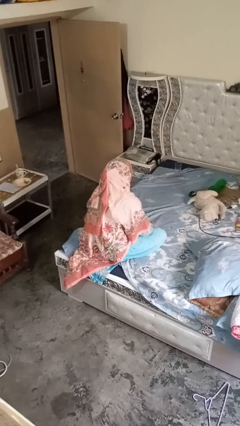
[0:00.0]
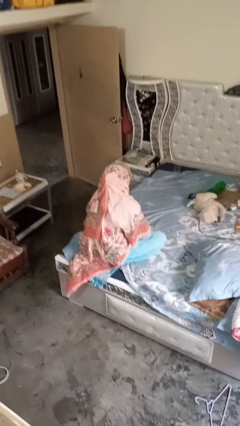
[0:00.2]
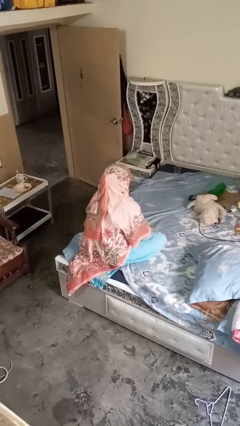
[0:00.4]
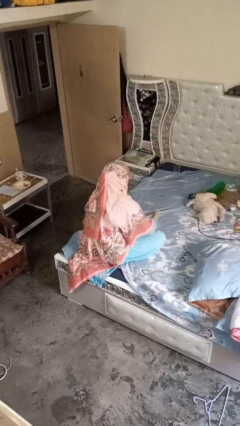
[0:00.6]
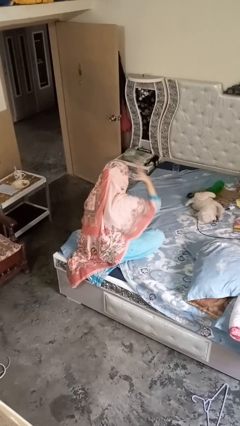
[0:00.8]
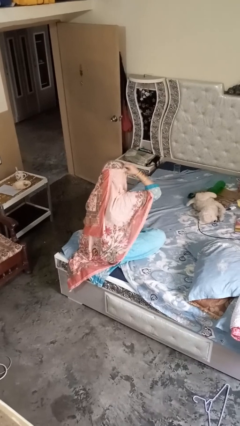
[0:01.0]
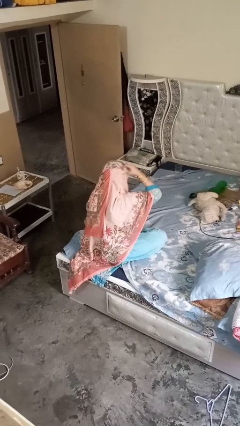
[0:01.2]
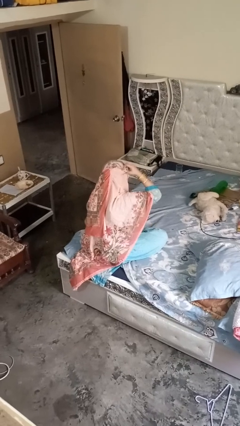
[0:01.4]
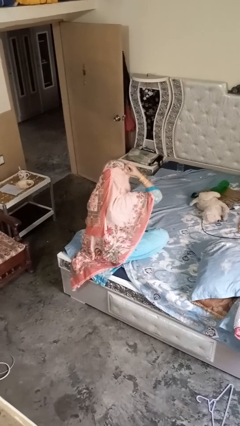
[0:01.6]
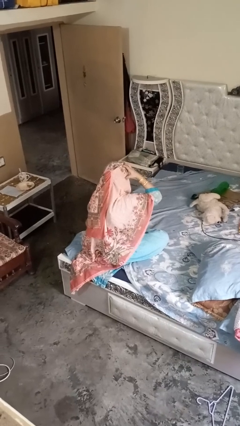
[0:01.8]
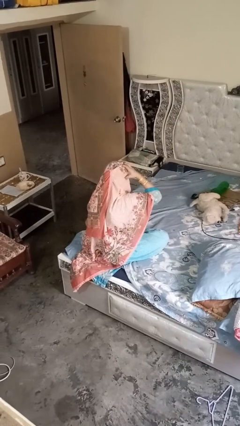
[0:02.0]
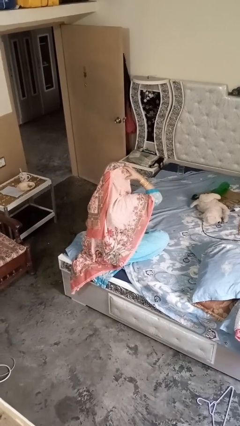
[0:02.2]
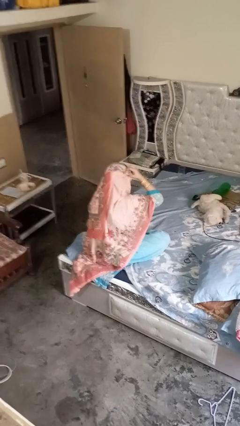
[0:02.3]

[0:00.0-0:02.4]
person strokes hair

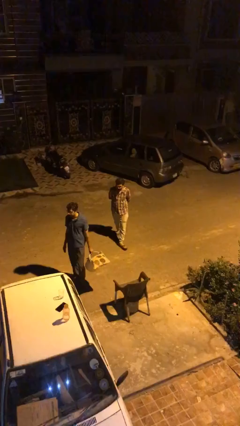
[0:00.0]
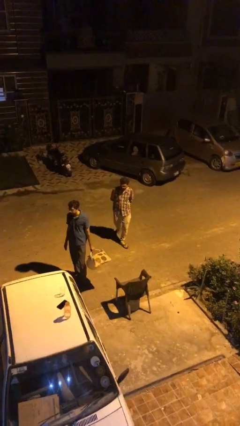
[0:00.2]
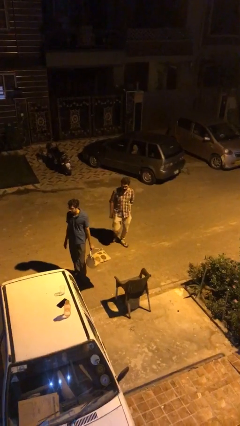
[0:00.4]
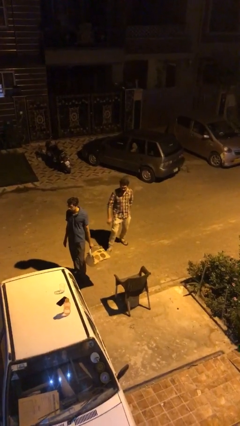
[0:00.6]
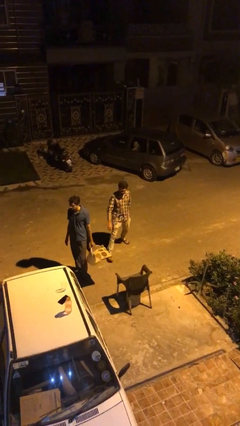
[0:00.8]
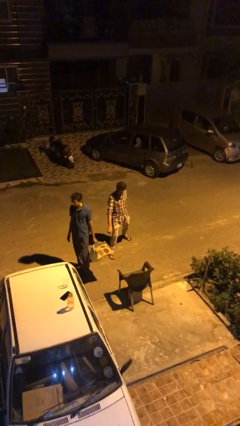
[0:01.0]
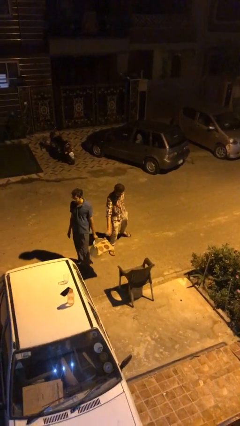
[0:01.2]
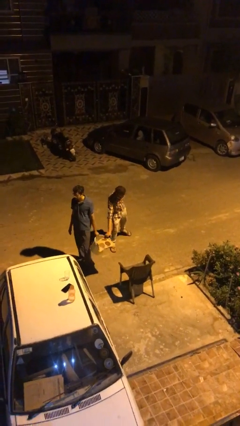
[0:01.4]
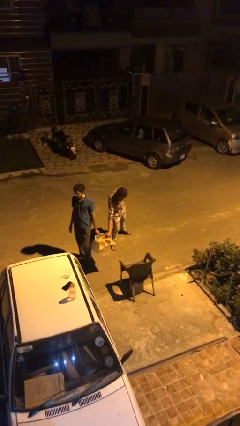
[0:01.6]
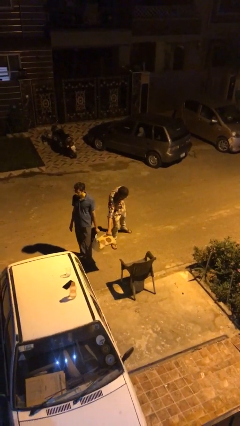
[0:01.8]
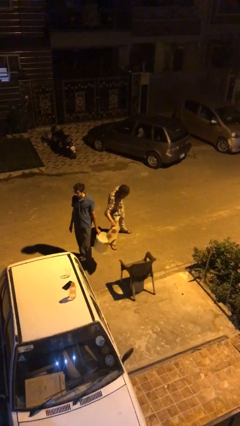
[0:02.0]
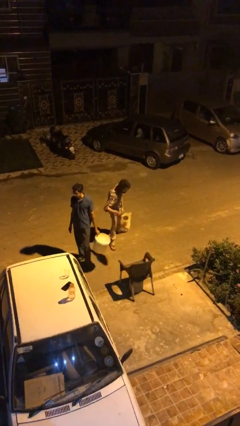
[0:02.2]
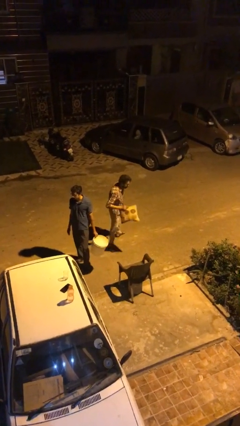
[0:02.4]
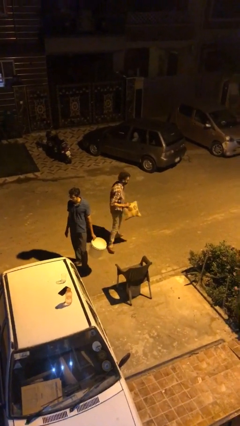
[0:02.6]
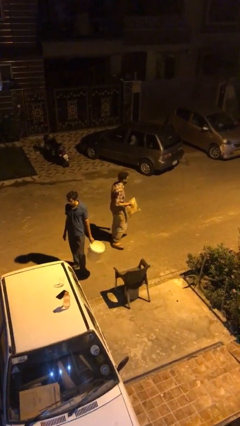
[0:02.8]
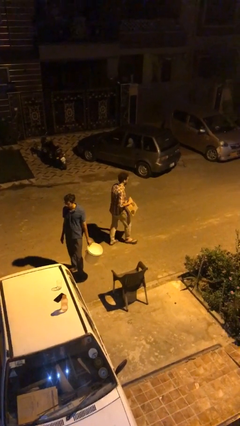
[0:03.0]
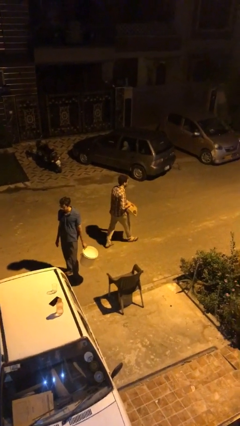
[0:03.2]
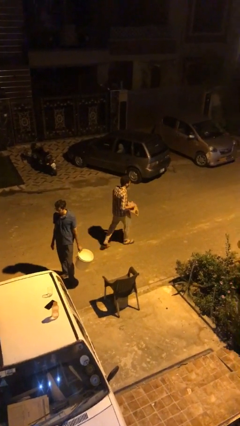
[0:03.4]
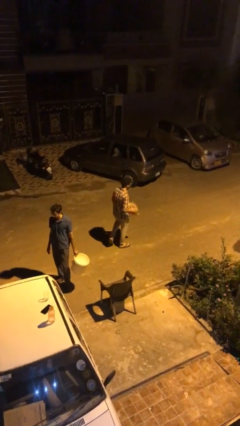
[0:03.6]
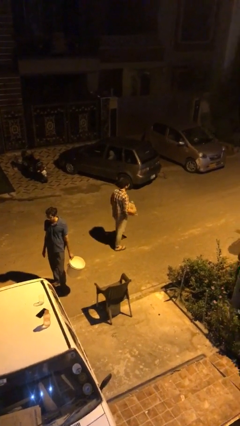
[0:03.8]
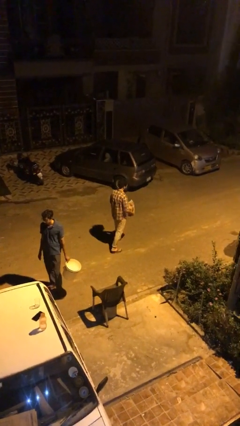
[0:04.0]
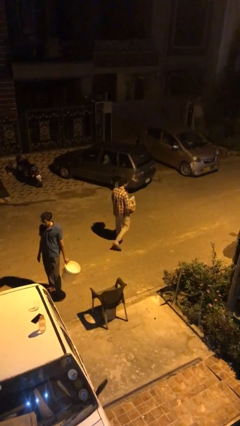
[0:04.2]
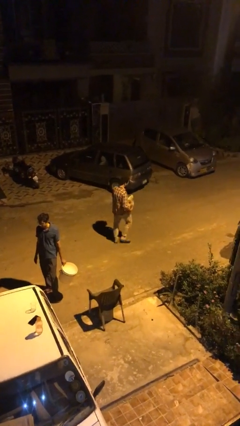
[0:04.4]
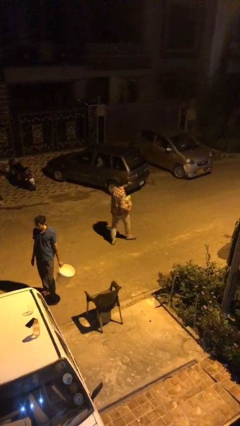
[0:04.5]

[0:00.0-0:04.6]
person steals object from person

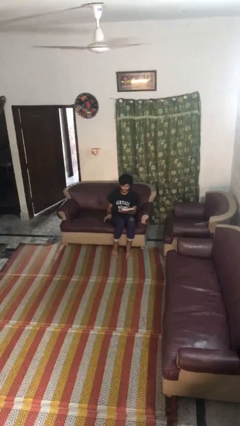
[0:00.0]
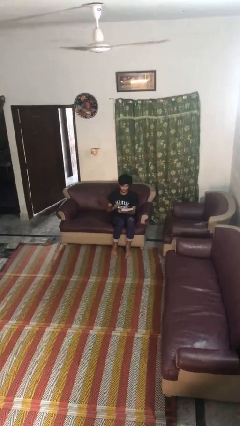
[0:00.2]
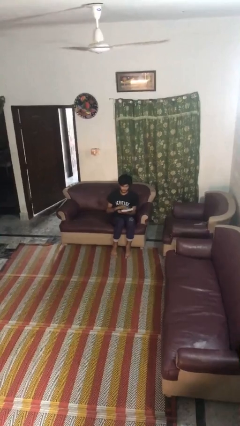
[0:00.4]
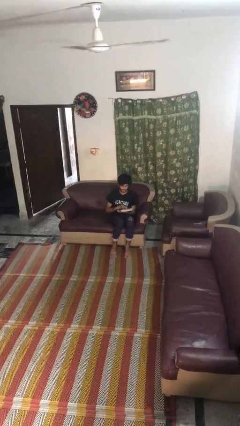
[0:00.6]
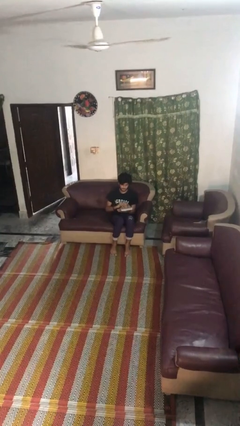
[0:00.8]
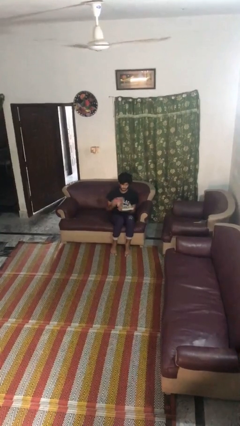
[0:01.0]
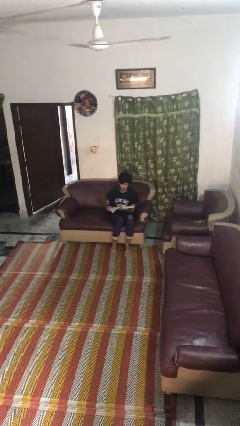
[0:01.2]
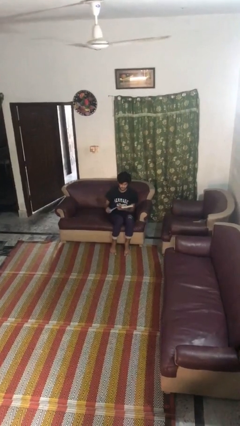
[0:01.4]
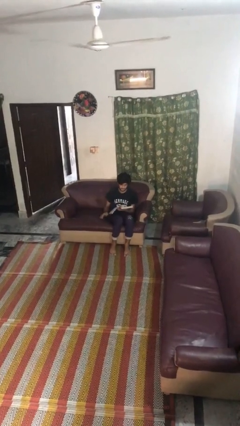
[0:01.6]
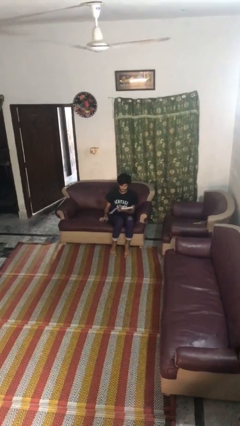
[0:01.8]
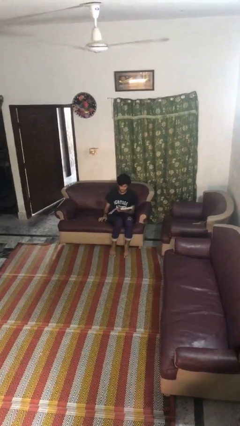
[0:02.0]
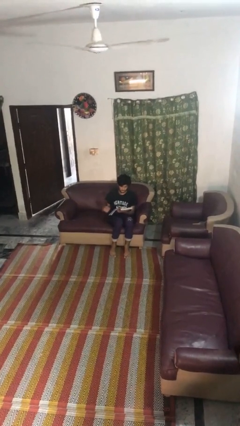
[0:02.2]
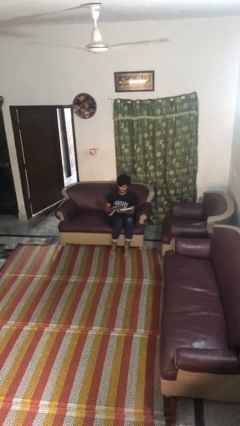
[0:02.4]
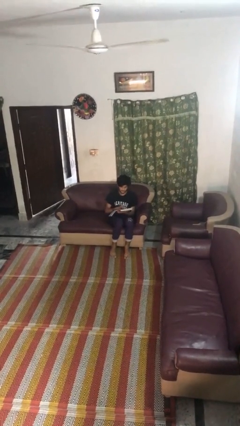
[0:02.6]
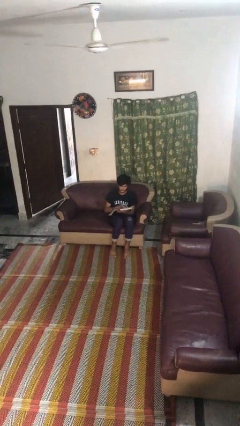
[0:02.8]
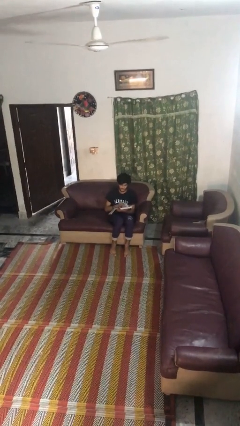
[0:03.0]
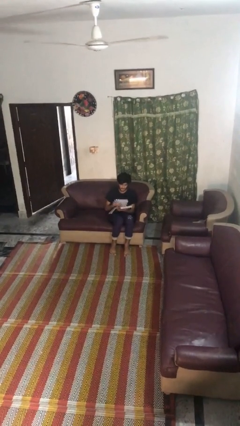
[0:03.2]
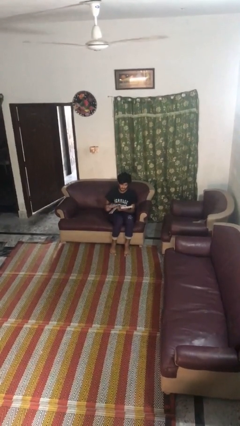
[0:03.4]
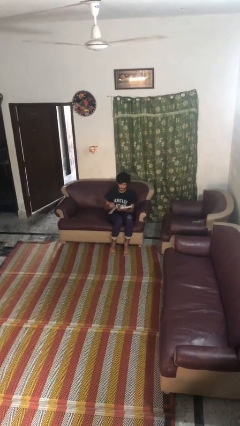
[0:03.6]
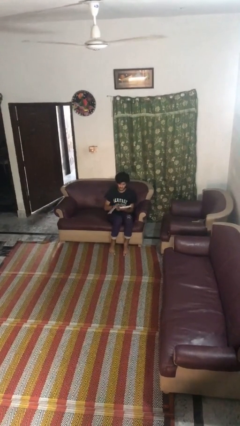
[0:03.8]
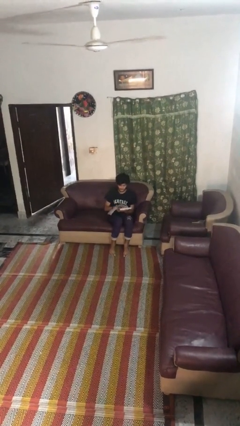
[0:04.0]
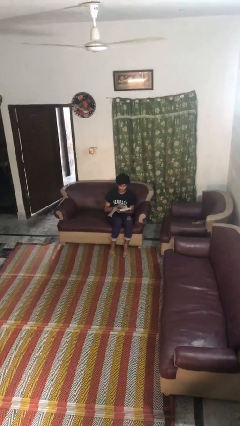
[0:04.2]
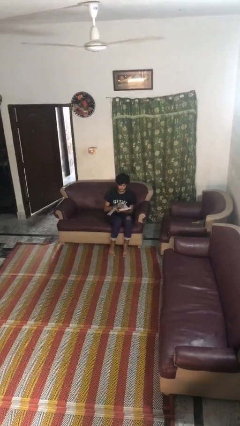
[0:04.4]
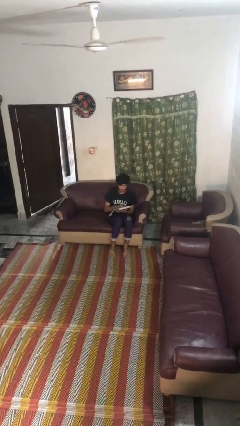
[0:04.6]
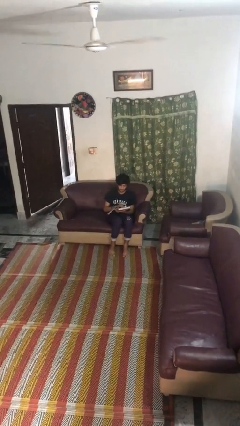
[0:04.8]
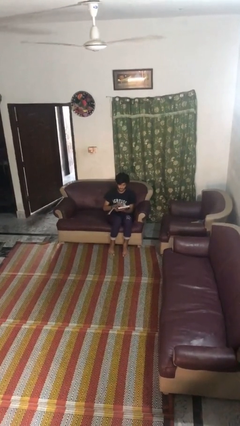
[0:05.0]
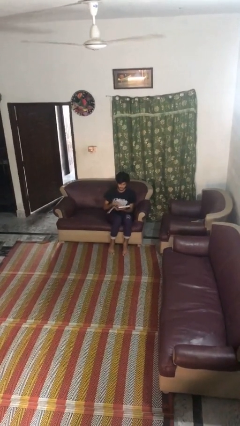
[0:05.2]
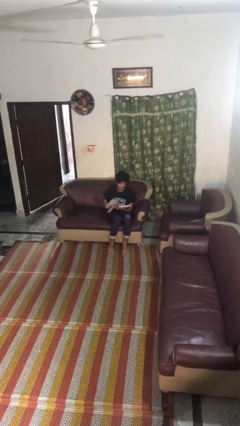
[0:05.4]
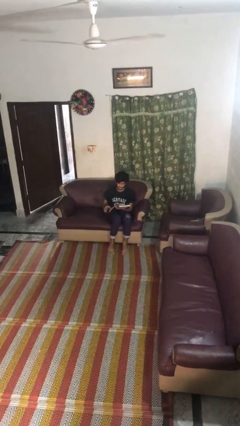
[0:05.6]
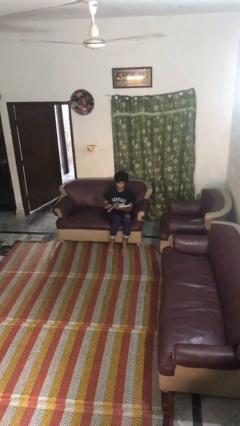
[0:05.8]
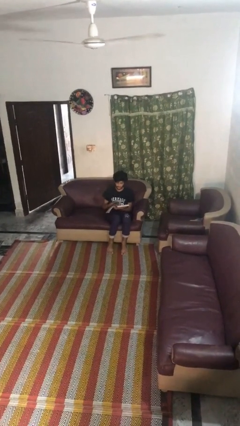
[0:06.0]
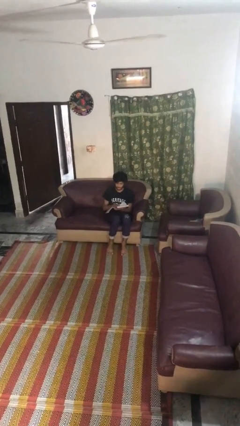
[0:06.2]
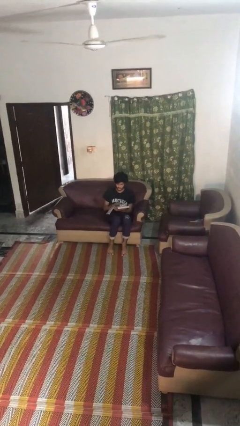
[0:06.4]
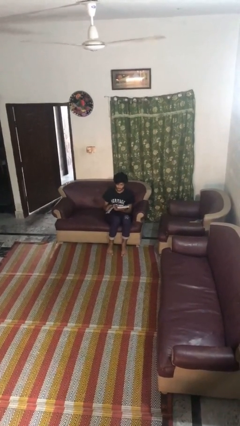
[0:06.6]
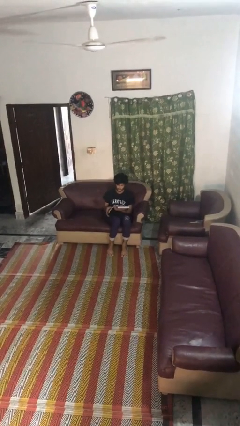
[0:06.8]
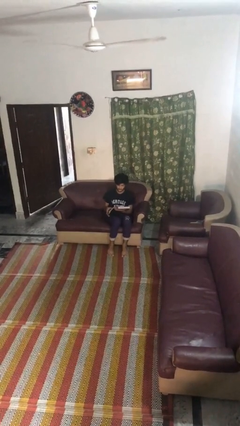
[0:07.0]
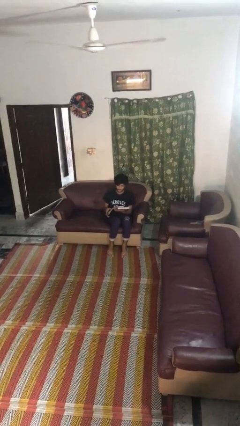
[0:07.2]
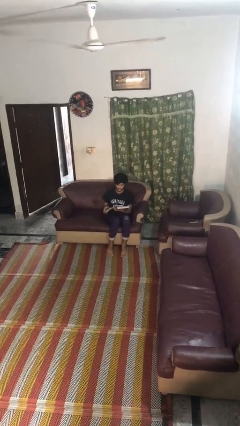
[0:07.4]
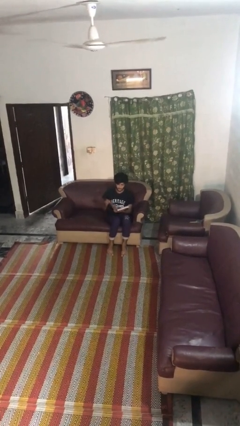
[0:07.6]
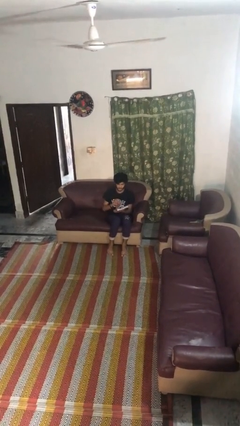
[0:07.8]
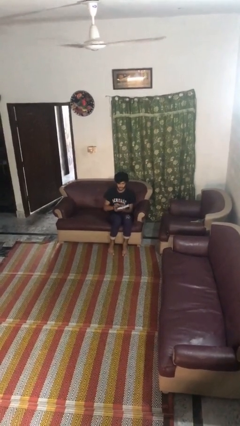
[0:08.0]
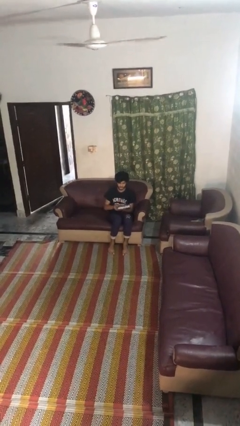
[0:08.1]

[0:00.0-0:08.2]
person reads book

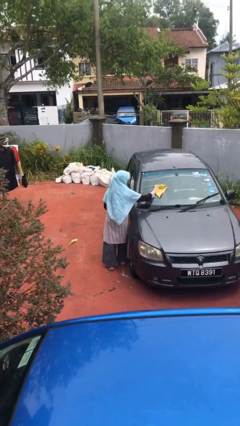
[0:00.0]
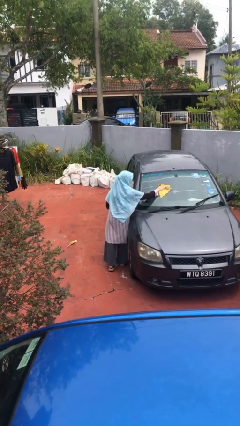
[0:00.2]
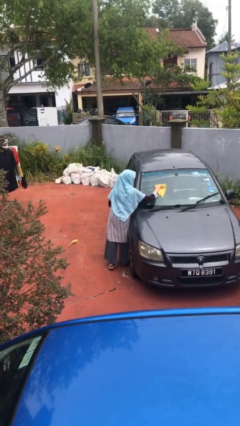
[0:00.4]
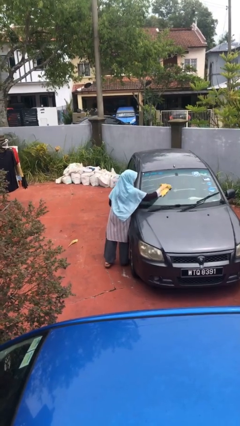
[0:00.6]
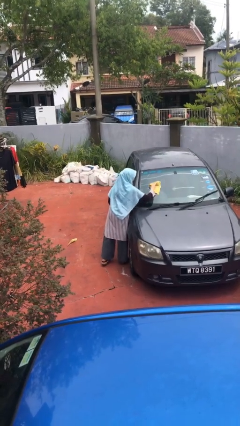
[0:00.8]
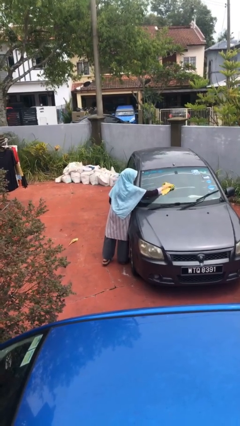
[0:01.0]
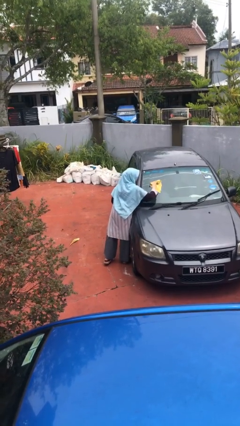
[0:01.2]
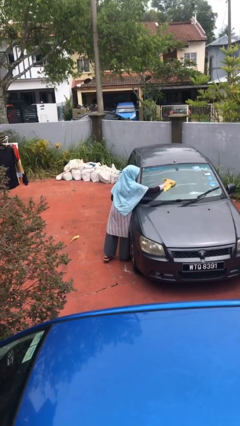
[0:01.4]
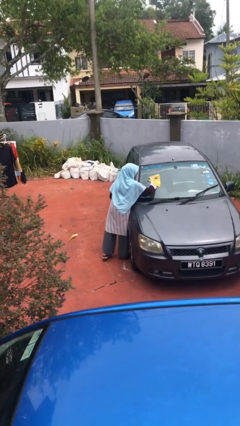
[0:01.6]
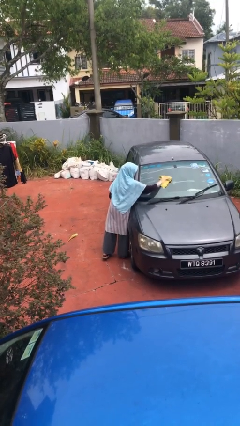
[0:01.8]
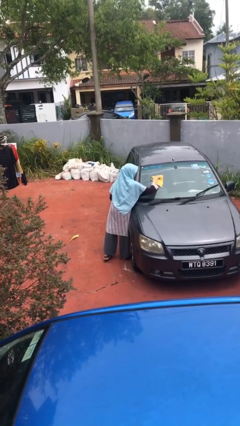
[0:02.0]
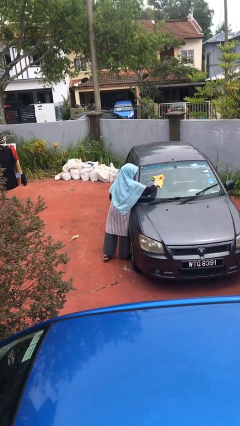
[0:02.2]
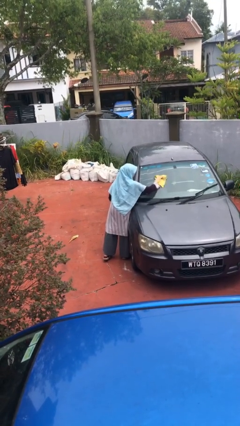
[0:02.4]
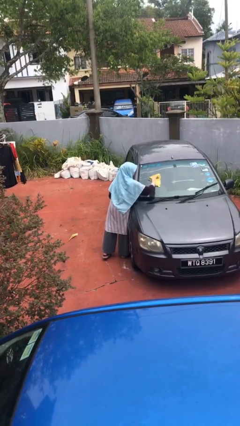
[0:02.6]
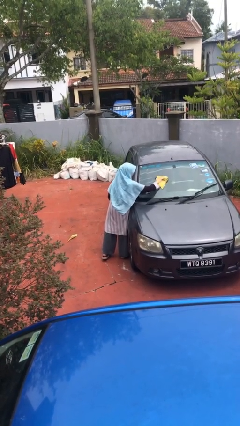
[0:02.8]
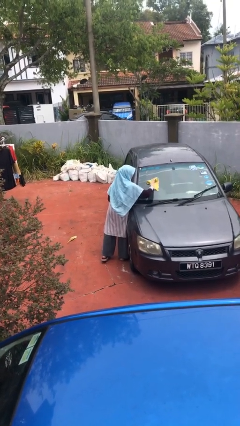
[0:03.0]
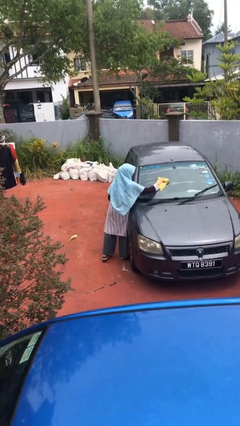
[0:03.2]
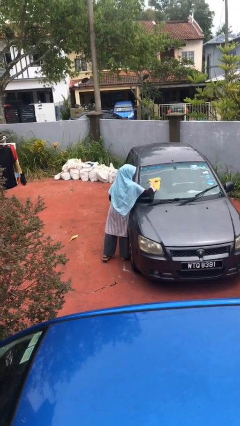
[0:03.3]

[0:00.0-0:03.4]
person polishes car with rag
